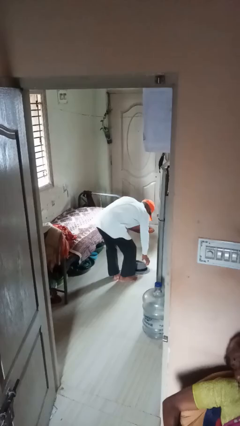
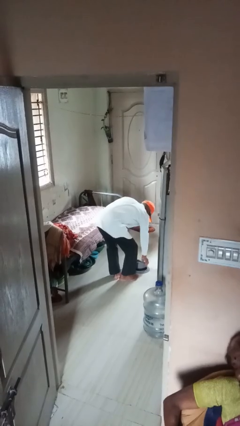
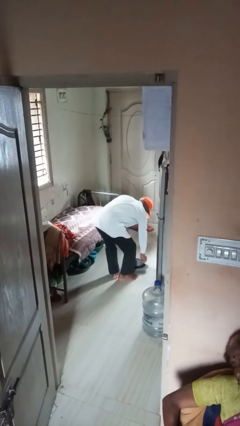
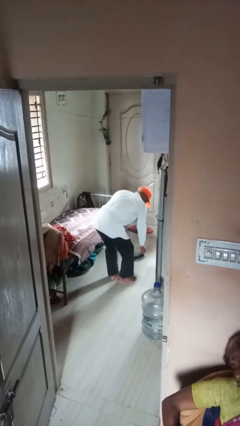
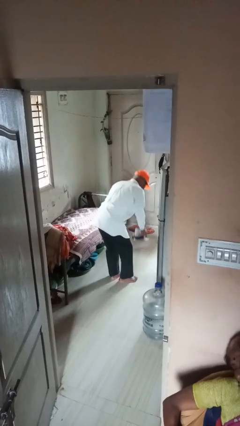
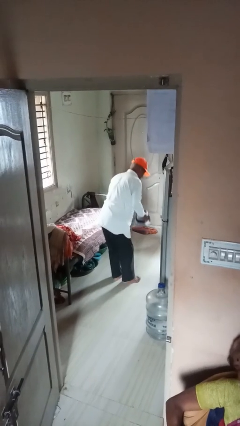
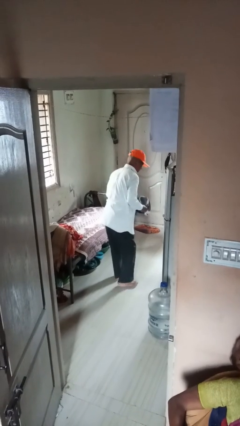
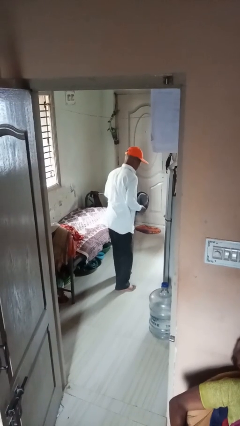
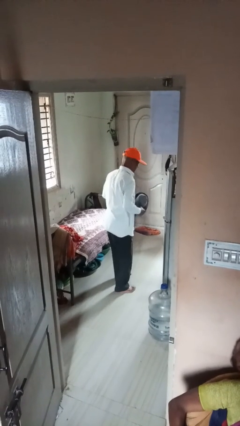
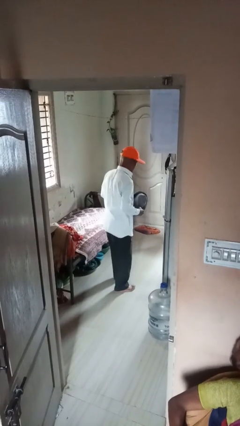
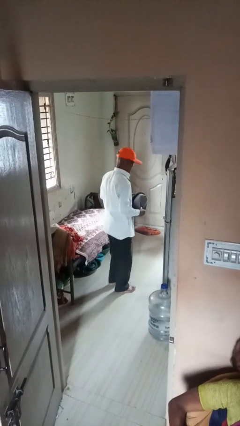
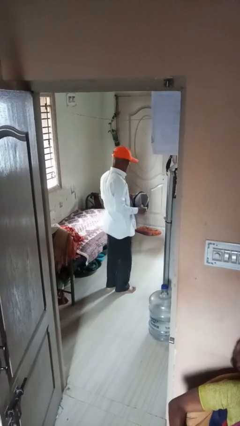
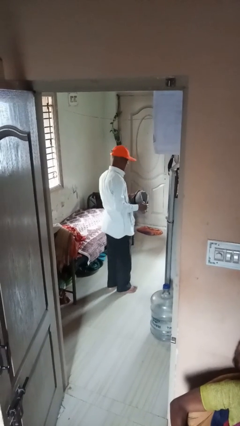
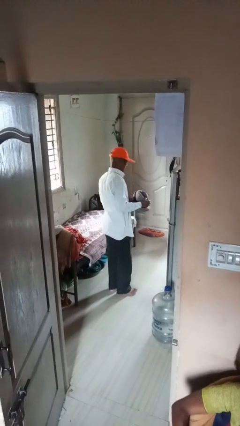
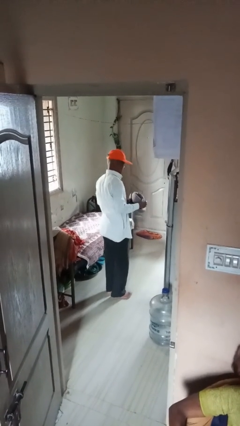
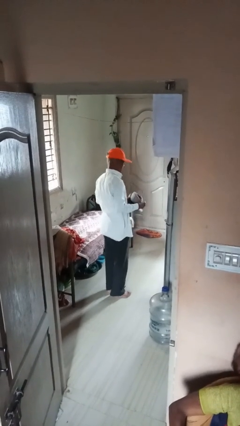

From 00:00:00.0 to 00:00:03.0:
person picks up object from floor

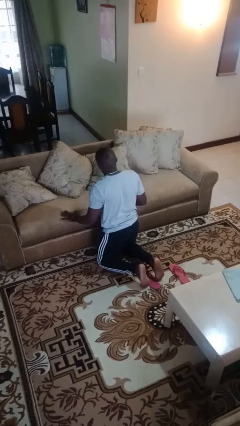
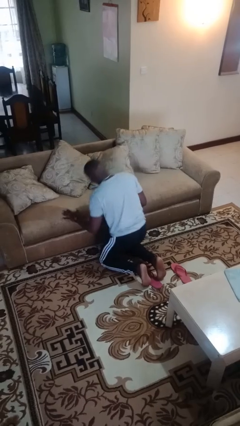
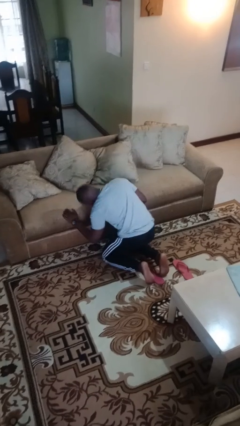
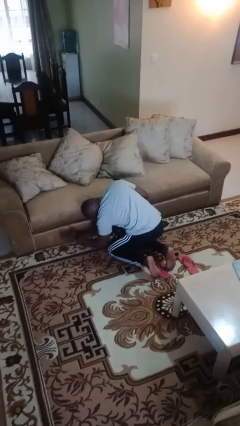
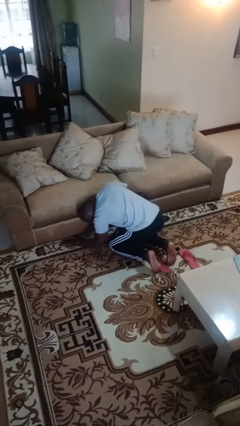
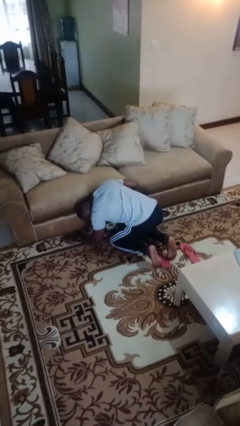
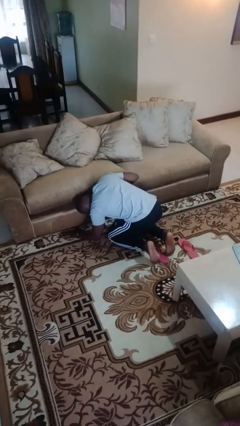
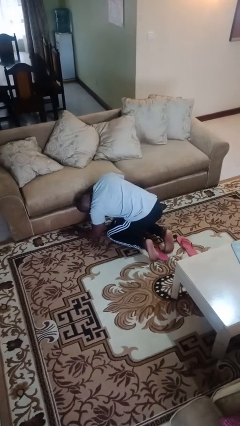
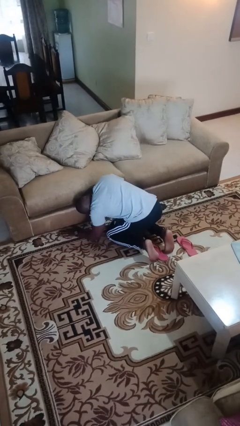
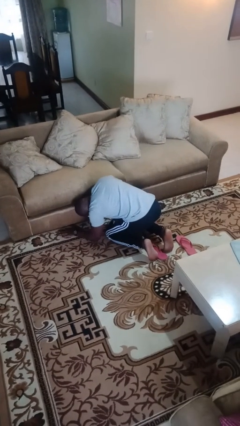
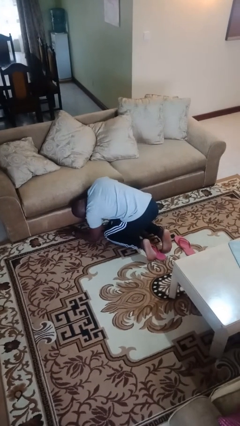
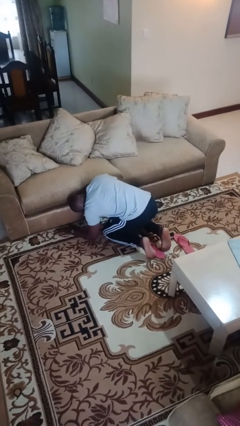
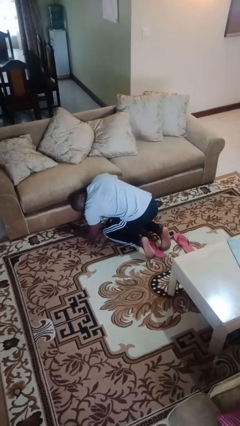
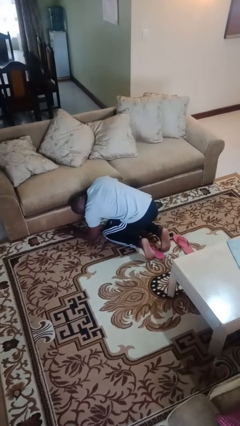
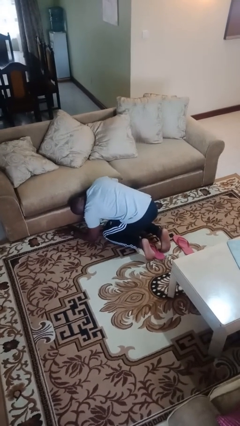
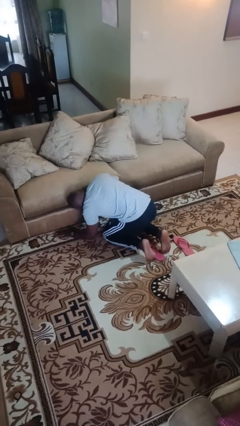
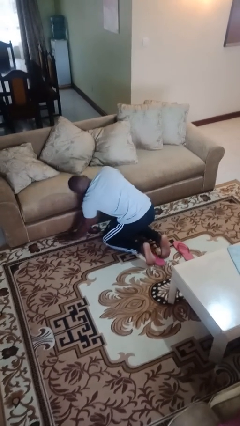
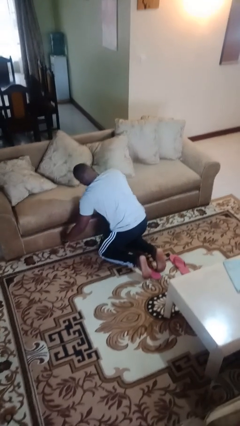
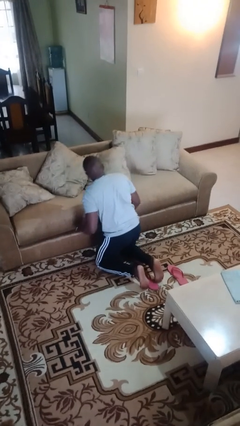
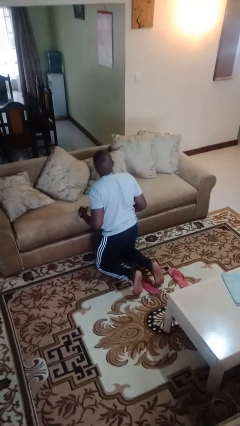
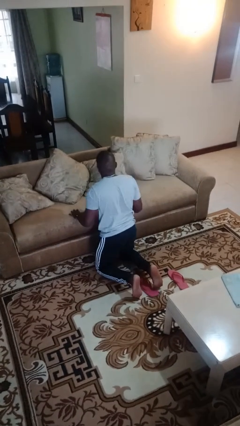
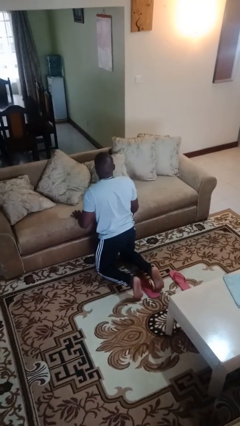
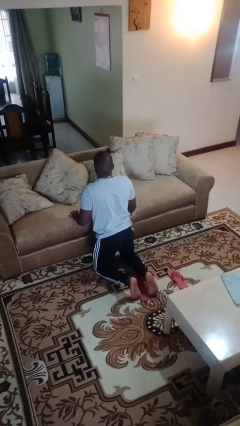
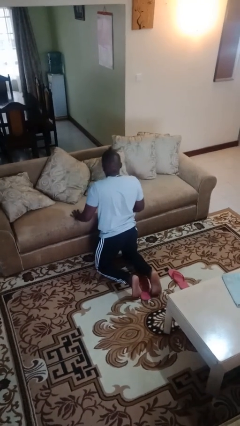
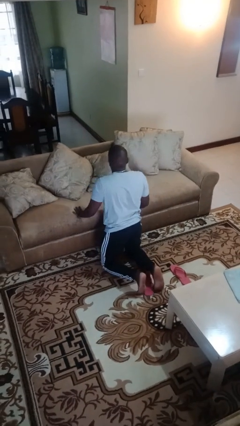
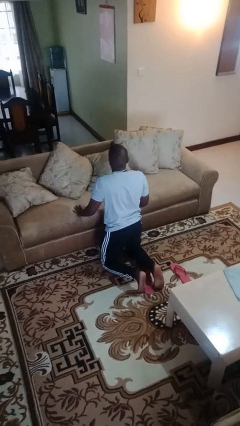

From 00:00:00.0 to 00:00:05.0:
person searches under couch

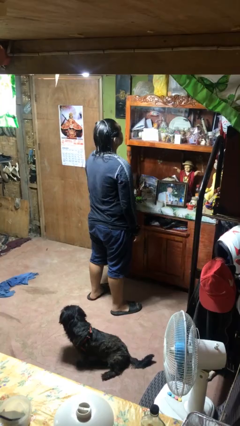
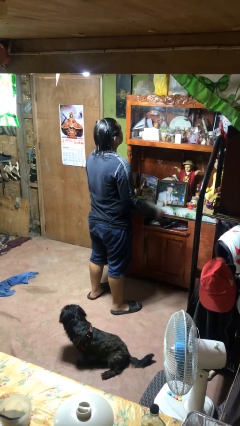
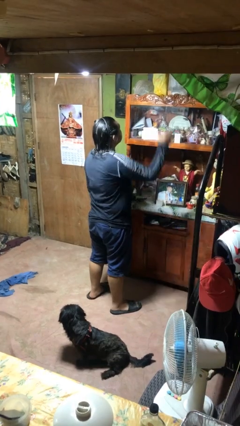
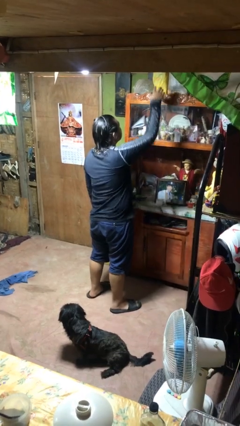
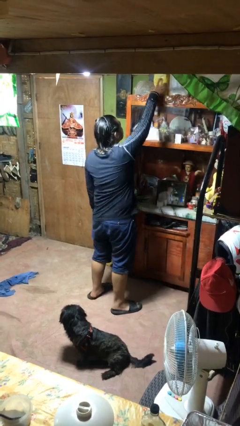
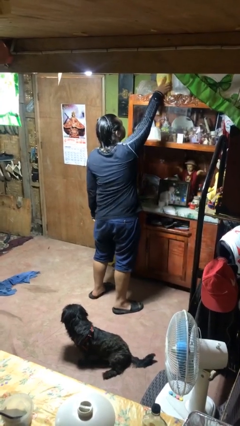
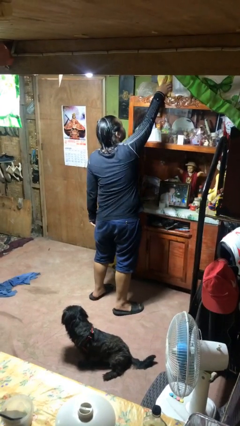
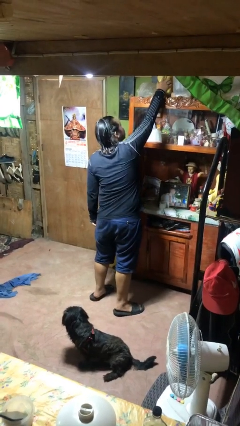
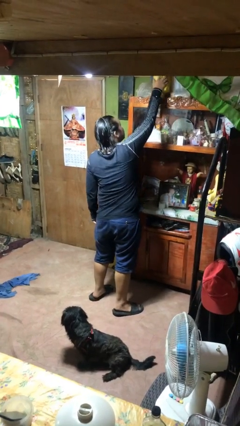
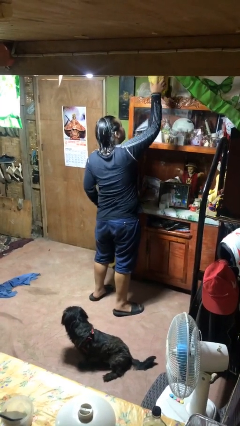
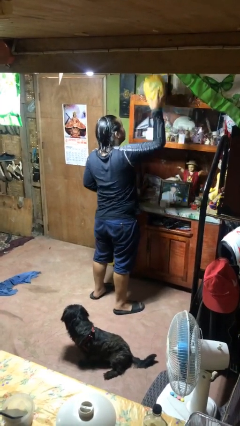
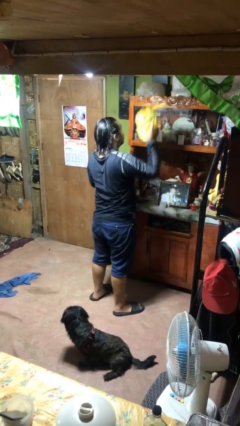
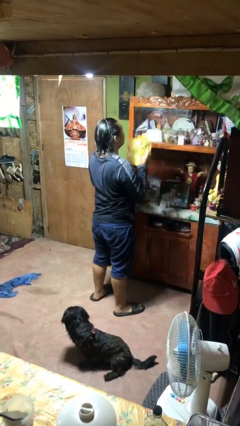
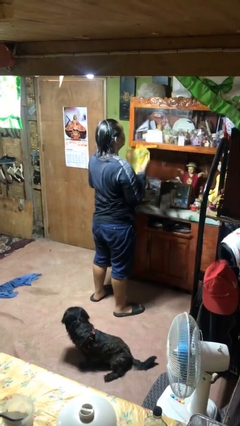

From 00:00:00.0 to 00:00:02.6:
person picks up object from shelf

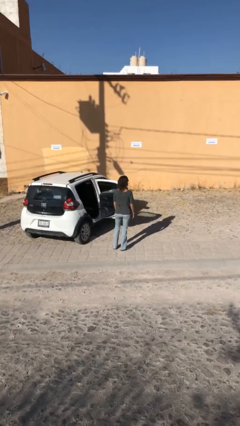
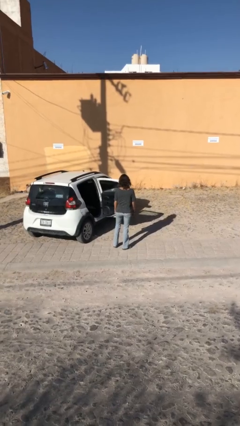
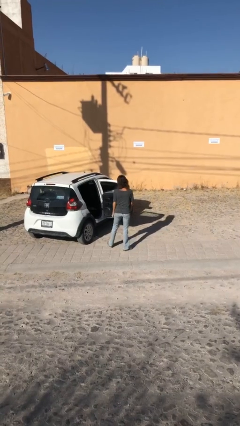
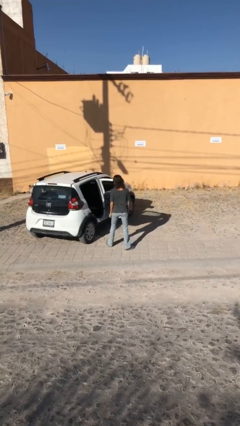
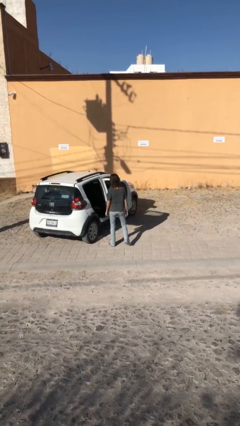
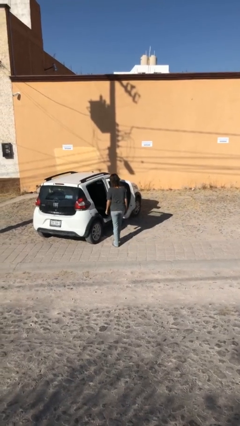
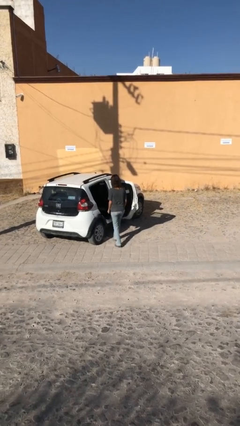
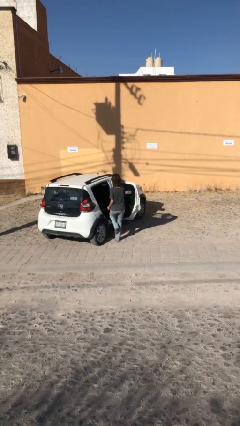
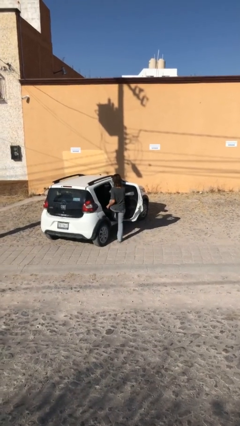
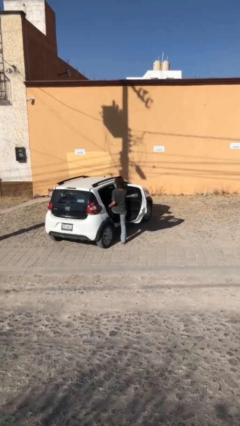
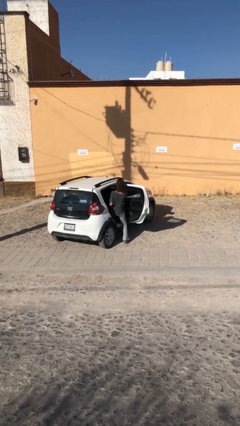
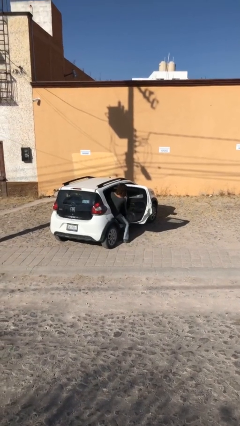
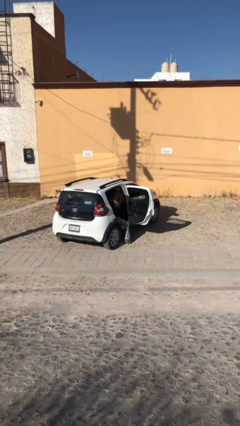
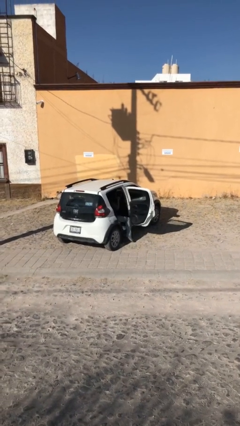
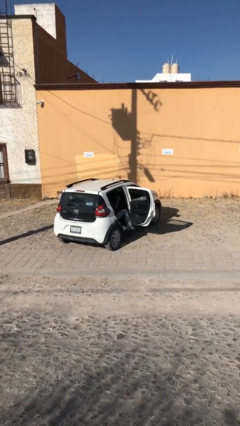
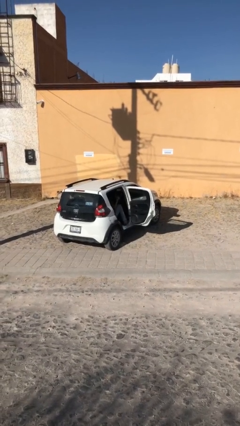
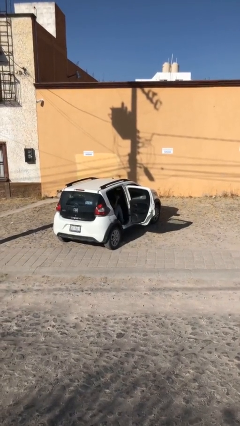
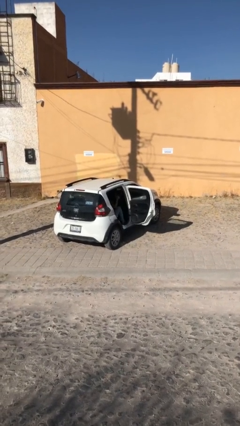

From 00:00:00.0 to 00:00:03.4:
person enters car

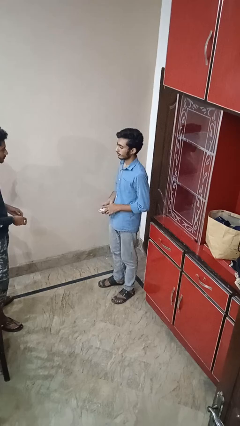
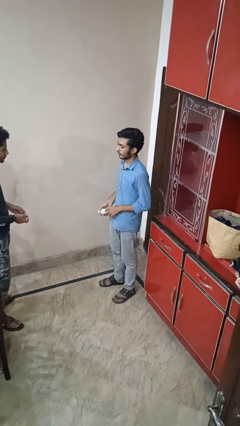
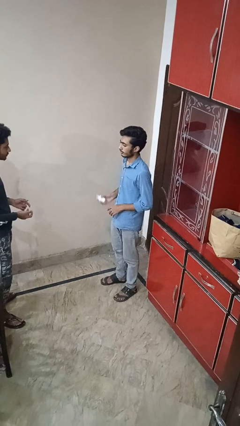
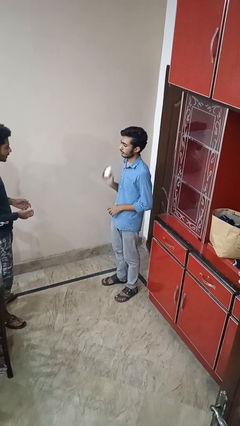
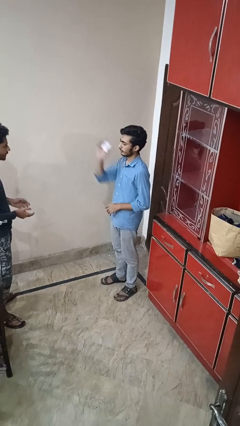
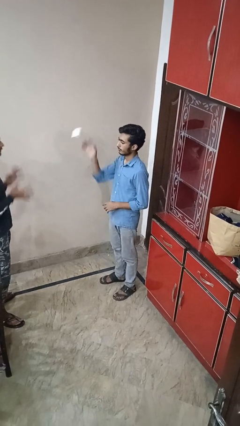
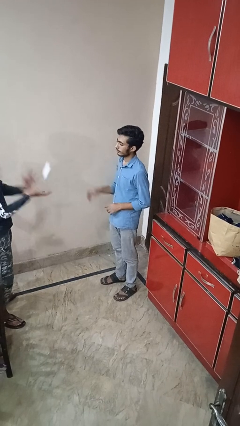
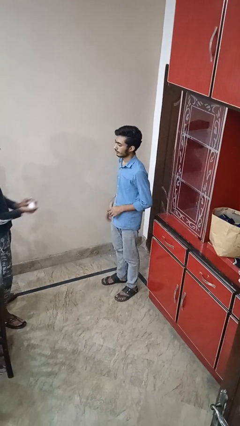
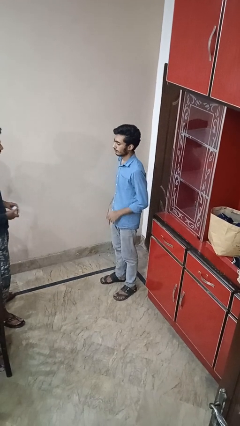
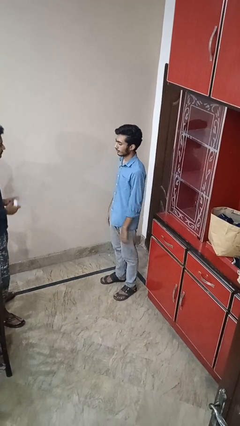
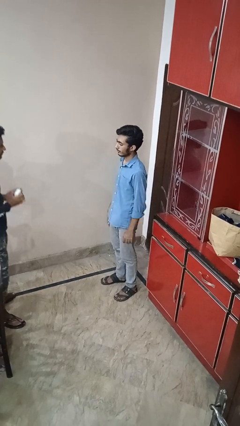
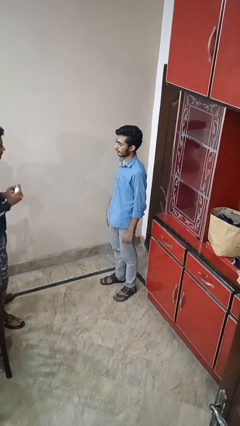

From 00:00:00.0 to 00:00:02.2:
person throws object to person

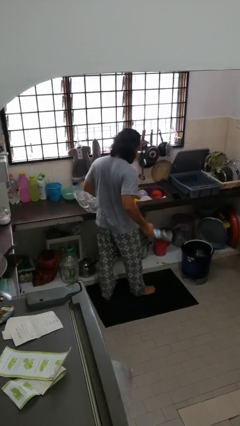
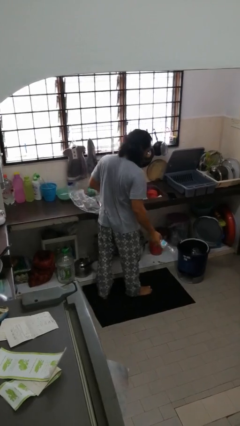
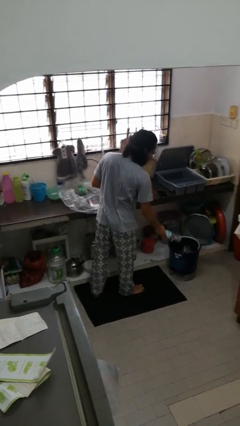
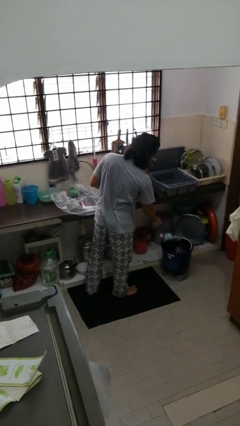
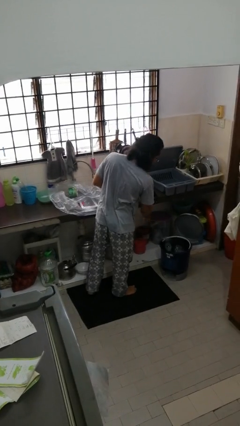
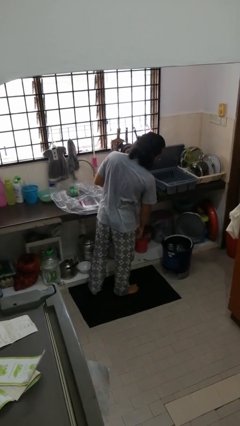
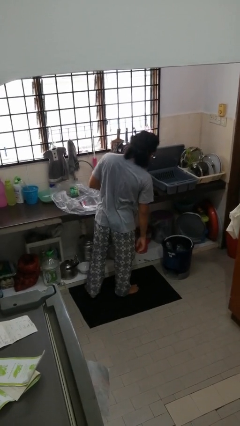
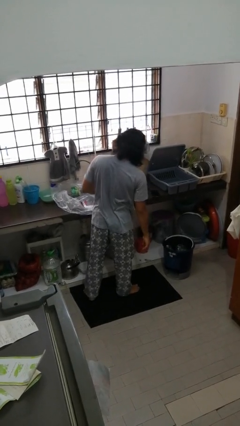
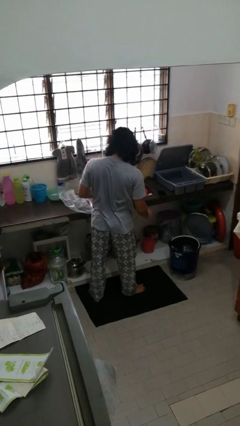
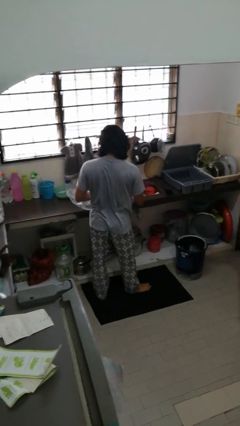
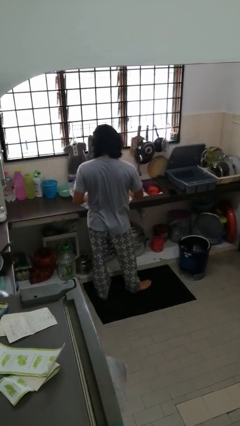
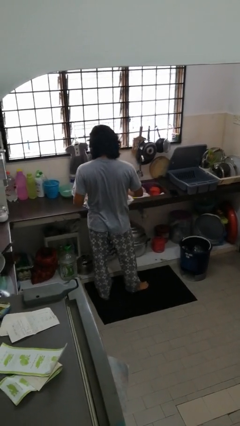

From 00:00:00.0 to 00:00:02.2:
person discards trash
